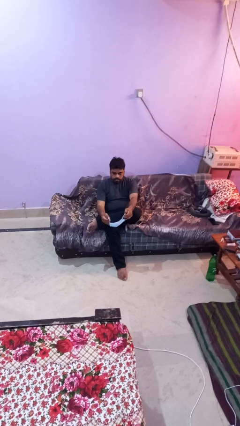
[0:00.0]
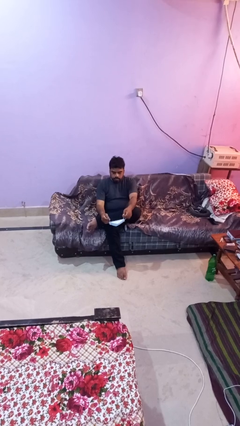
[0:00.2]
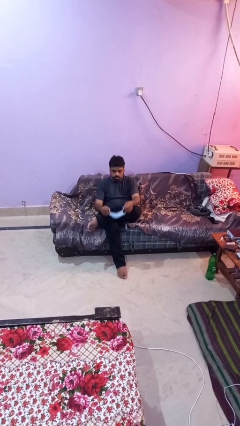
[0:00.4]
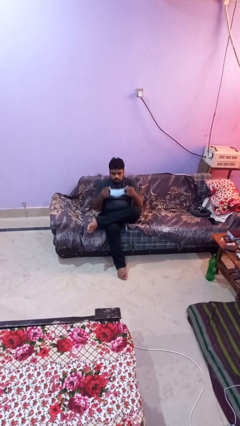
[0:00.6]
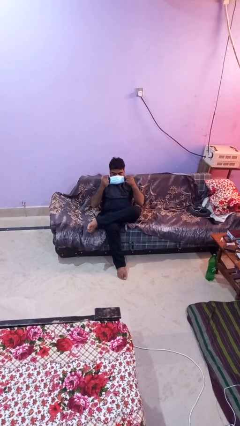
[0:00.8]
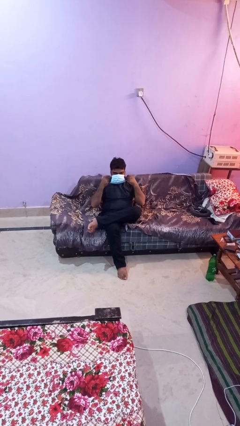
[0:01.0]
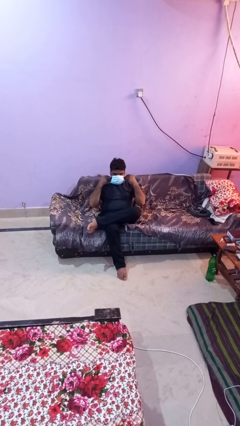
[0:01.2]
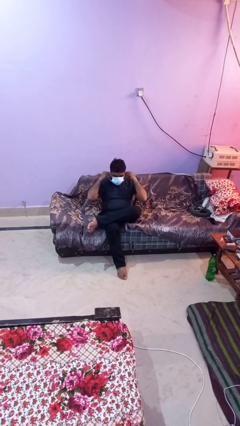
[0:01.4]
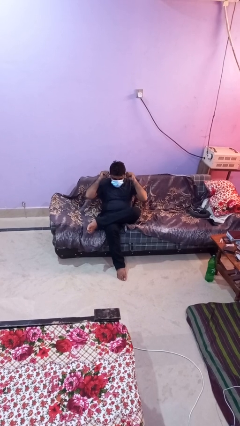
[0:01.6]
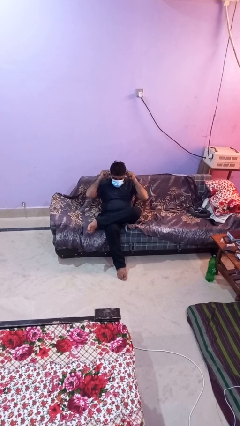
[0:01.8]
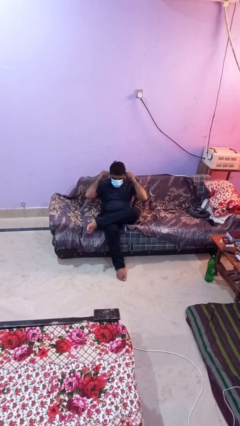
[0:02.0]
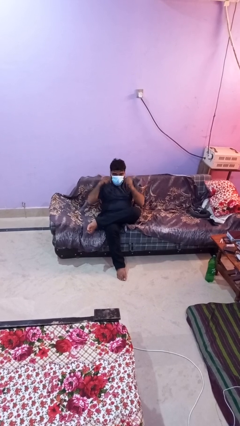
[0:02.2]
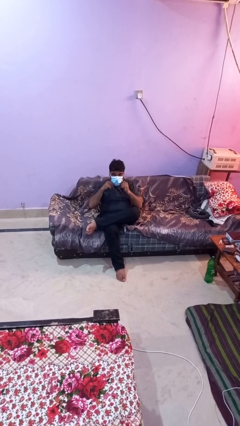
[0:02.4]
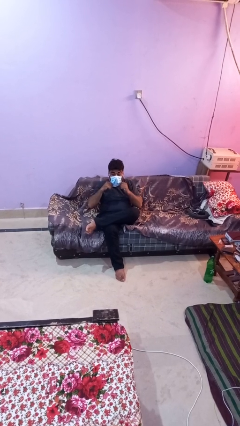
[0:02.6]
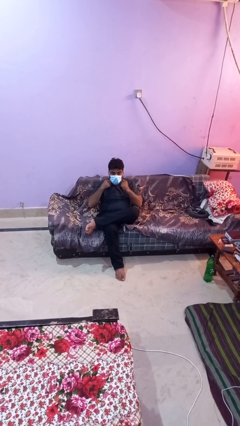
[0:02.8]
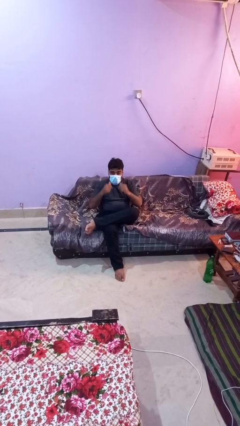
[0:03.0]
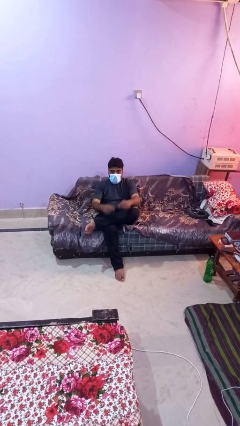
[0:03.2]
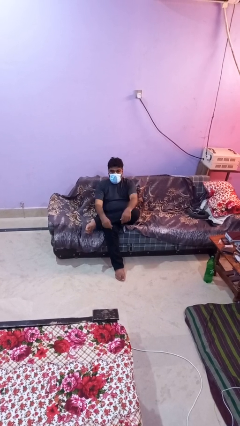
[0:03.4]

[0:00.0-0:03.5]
person puts on facemask

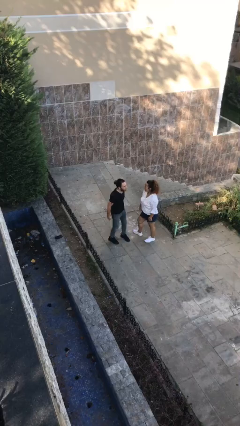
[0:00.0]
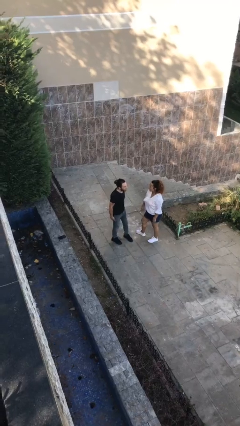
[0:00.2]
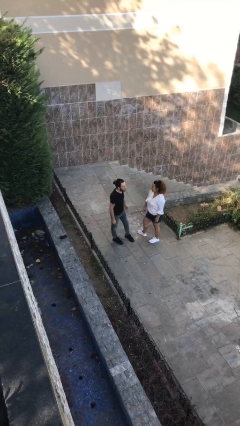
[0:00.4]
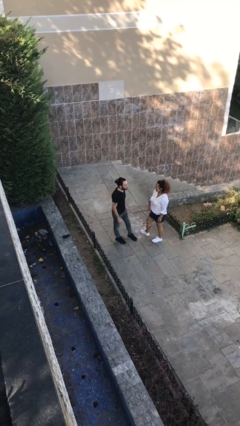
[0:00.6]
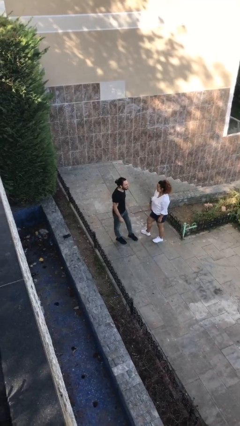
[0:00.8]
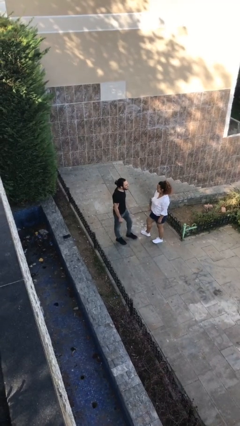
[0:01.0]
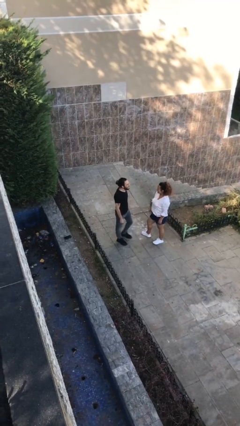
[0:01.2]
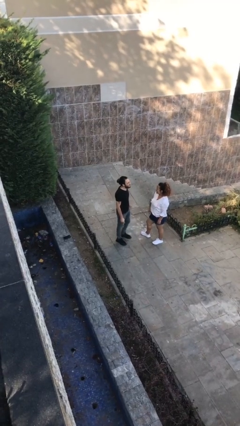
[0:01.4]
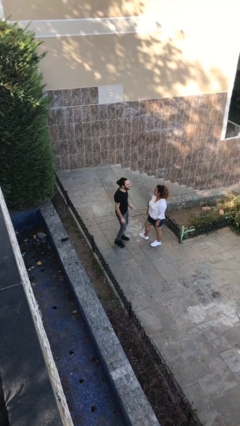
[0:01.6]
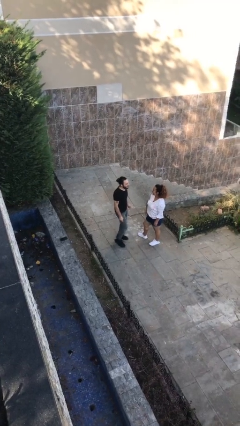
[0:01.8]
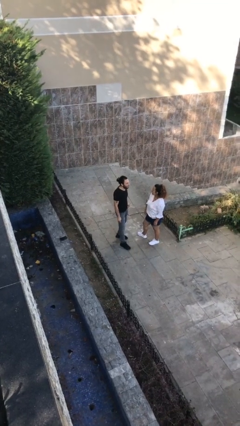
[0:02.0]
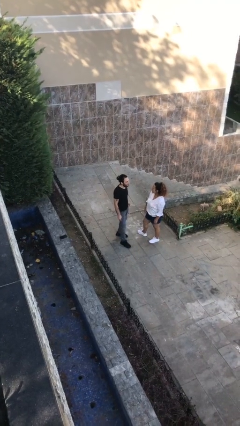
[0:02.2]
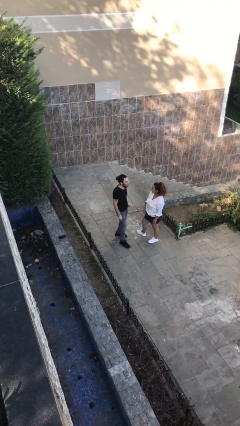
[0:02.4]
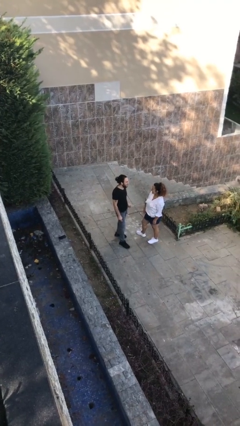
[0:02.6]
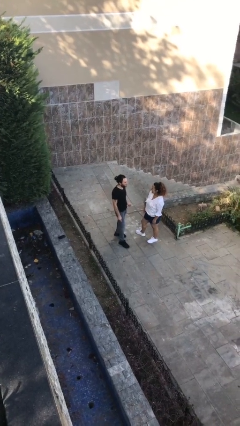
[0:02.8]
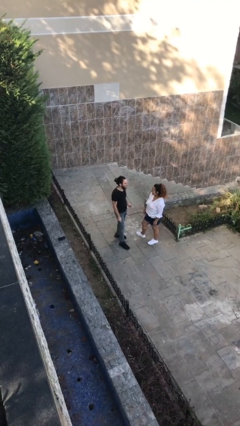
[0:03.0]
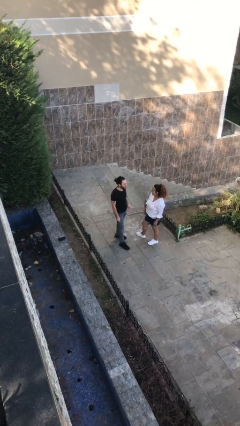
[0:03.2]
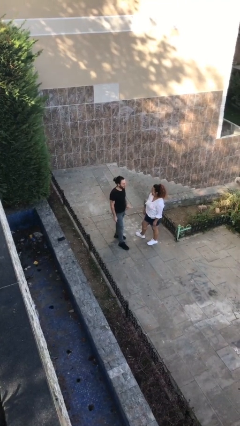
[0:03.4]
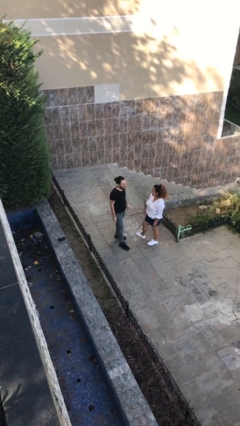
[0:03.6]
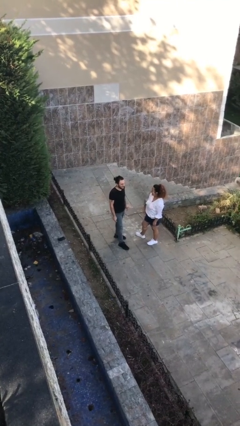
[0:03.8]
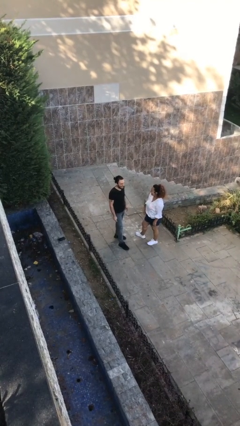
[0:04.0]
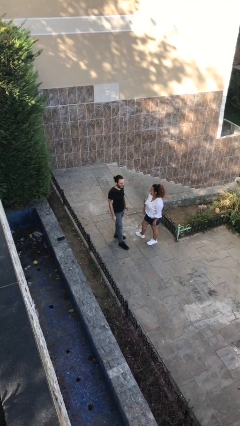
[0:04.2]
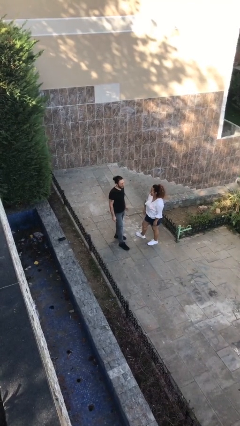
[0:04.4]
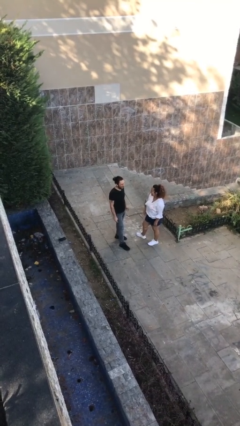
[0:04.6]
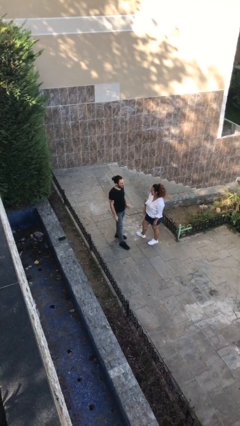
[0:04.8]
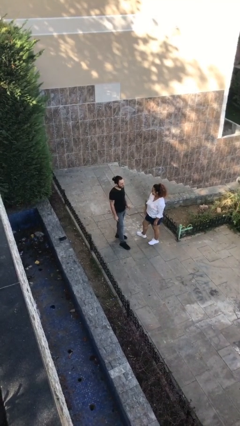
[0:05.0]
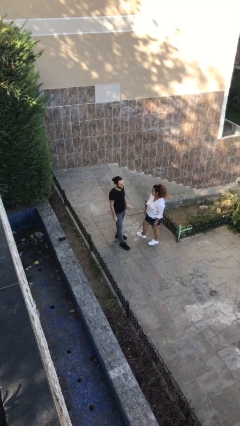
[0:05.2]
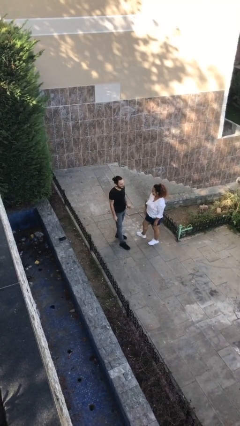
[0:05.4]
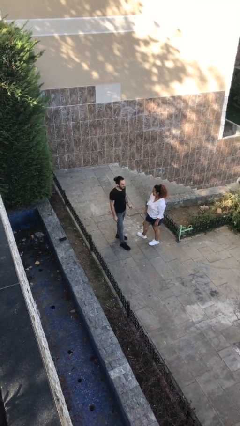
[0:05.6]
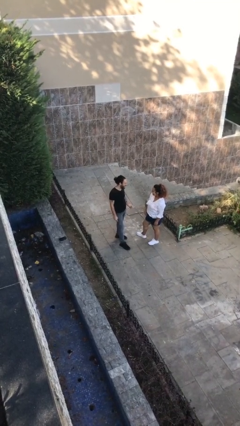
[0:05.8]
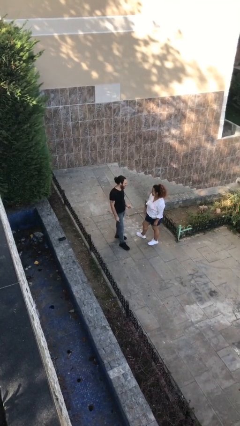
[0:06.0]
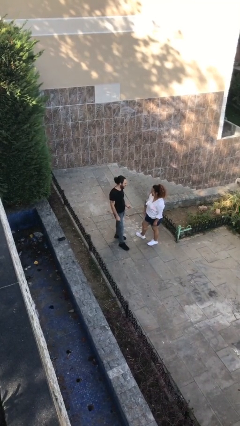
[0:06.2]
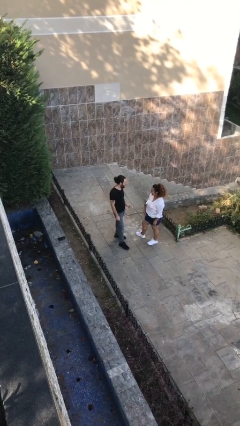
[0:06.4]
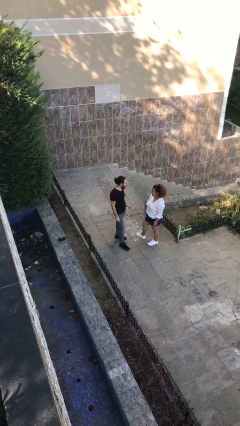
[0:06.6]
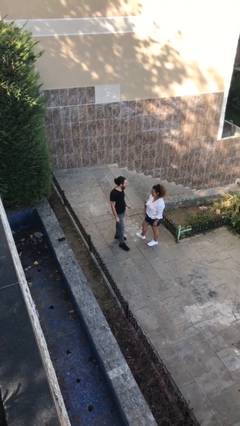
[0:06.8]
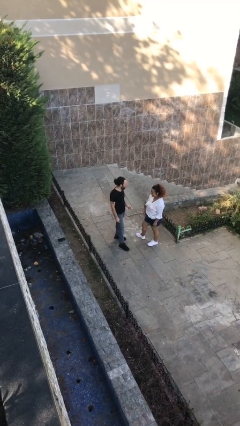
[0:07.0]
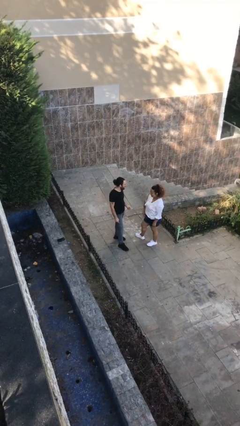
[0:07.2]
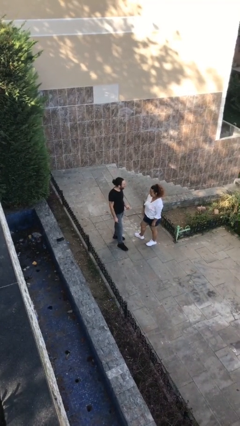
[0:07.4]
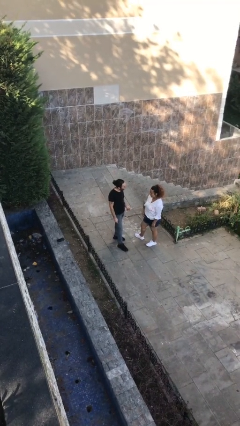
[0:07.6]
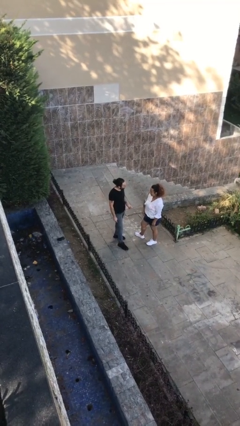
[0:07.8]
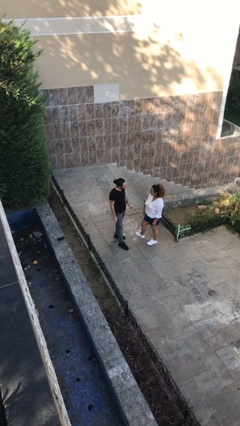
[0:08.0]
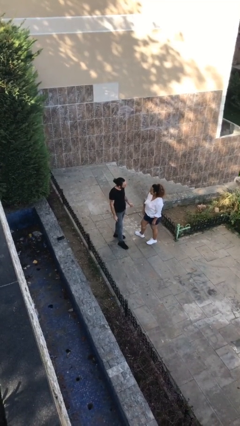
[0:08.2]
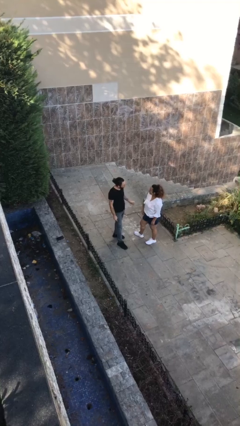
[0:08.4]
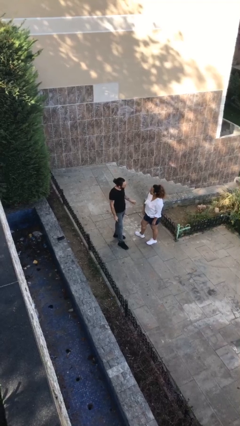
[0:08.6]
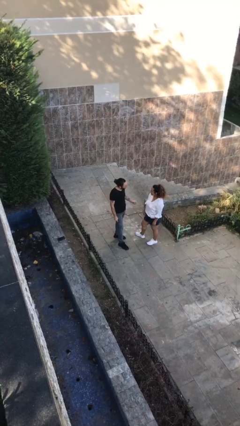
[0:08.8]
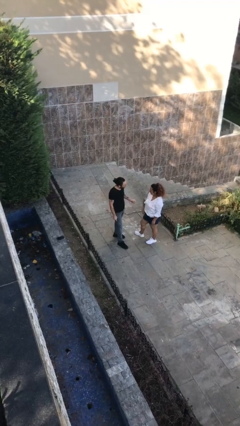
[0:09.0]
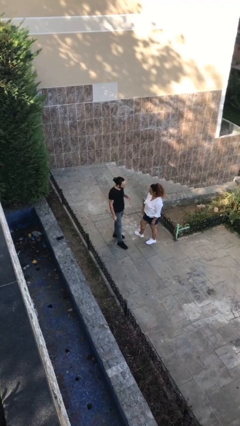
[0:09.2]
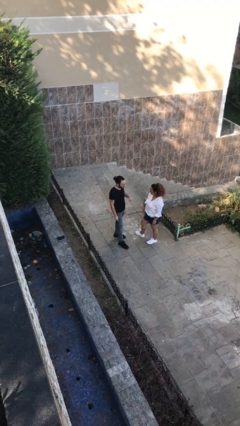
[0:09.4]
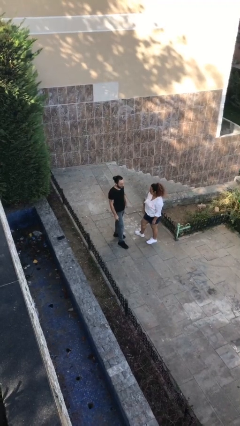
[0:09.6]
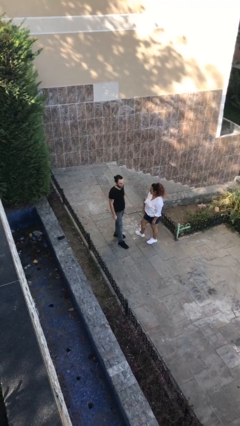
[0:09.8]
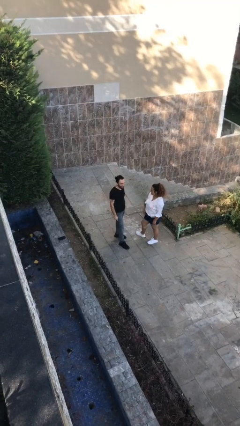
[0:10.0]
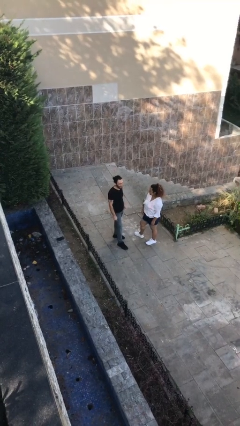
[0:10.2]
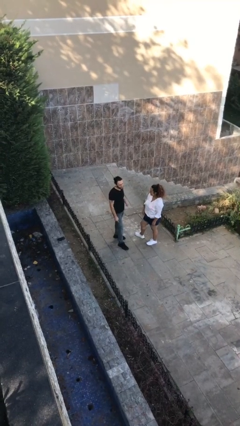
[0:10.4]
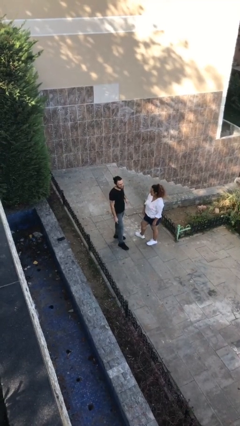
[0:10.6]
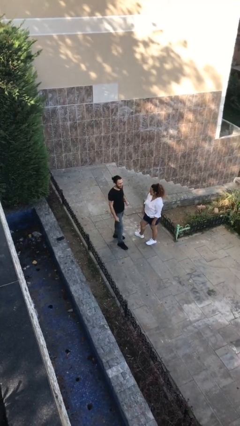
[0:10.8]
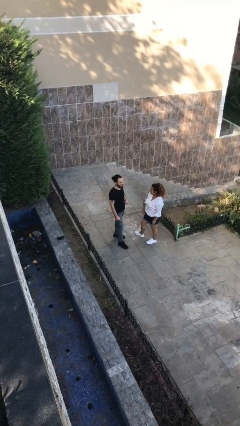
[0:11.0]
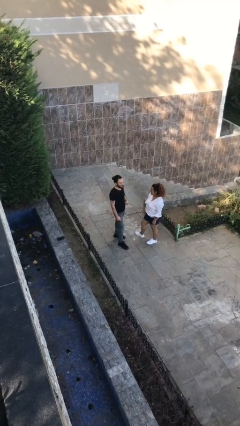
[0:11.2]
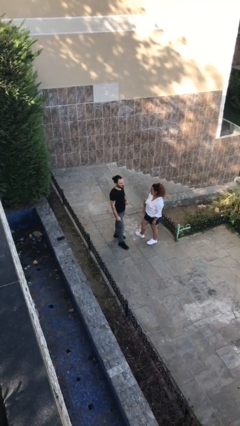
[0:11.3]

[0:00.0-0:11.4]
person talks to person

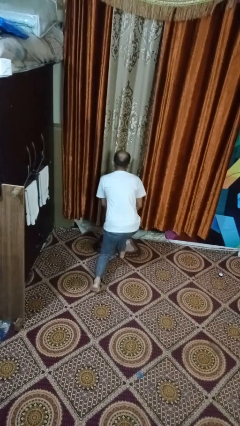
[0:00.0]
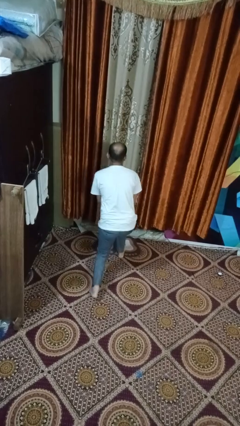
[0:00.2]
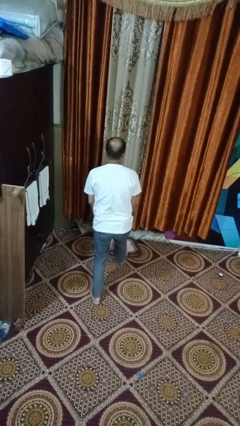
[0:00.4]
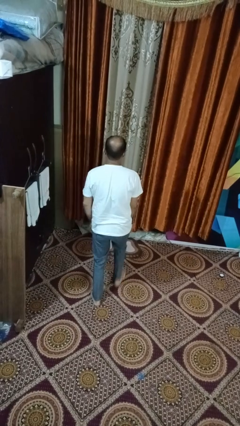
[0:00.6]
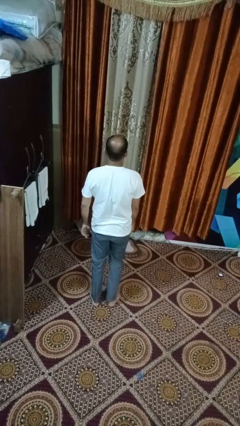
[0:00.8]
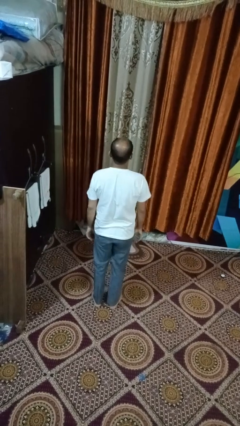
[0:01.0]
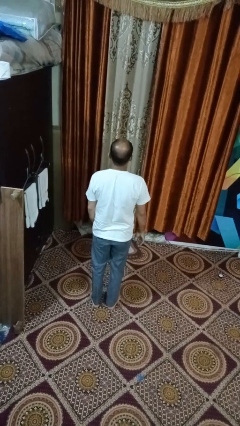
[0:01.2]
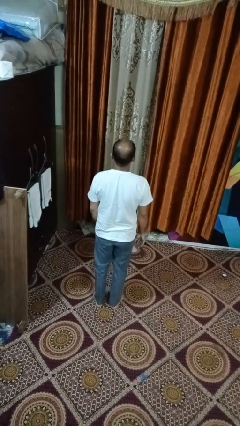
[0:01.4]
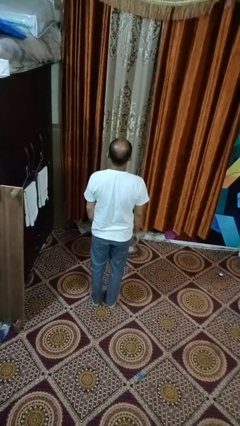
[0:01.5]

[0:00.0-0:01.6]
person stands up from floor

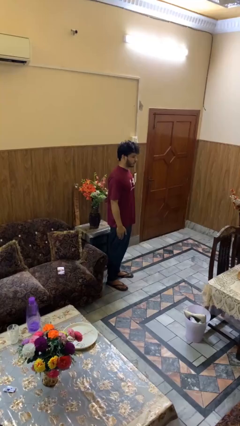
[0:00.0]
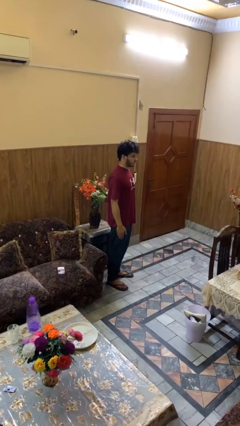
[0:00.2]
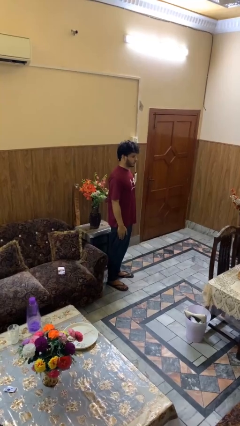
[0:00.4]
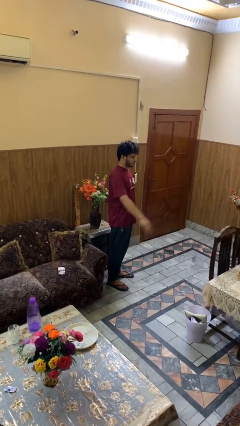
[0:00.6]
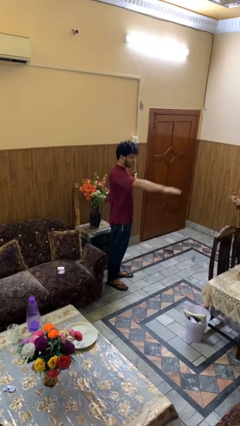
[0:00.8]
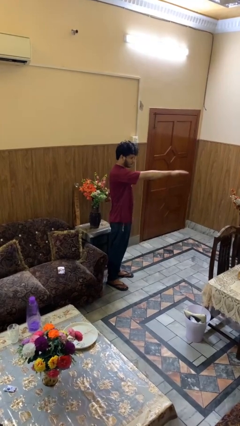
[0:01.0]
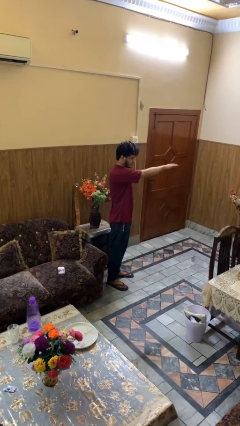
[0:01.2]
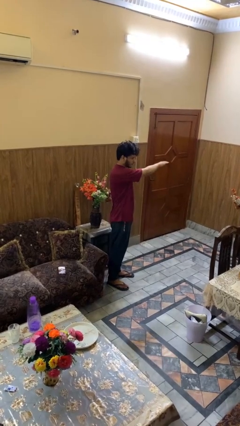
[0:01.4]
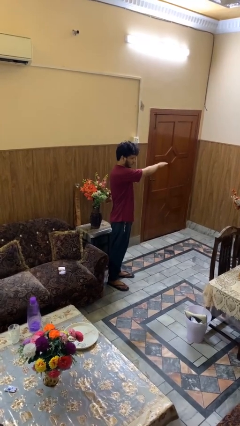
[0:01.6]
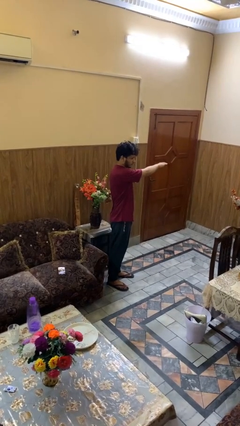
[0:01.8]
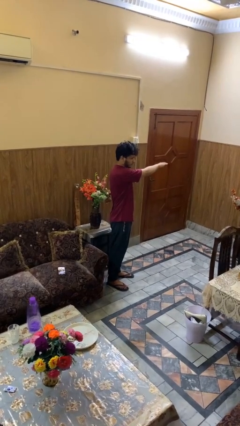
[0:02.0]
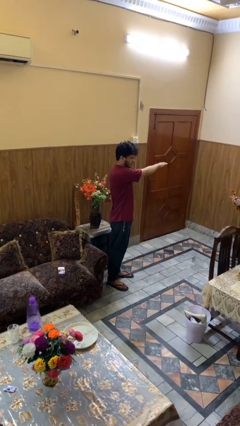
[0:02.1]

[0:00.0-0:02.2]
person gestures swipe left
